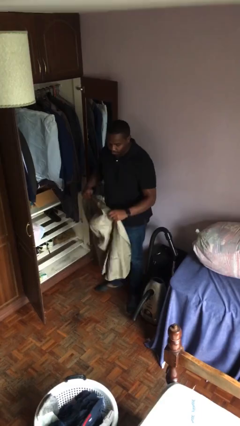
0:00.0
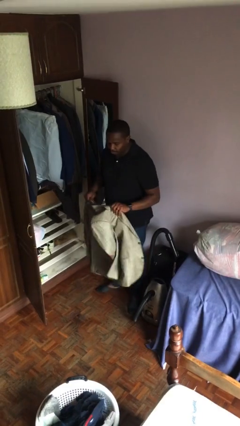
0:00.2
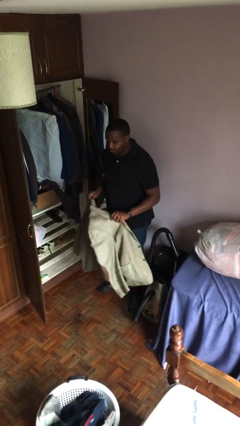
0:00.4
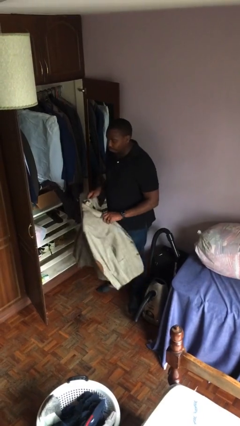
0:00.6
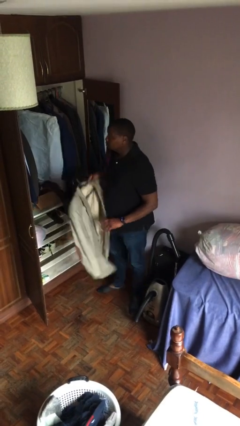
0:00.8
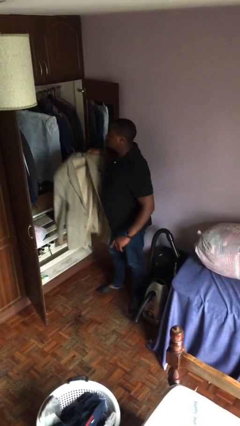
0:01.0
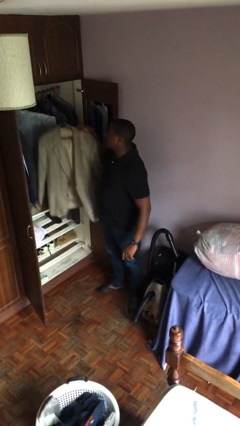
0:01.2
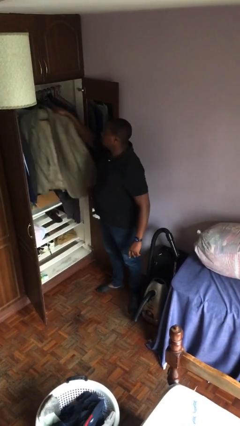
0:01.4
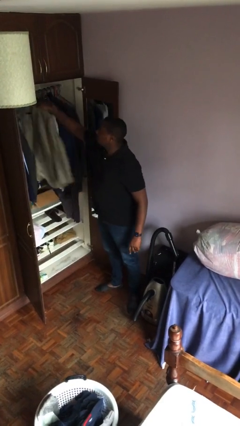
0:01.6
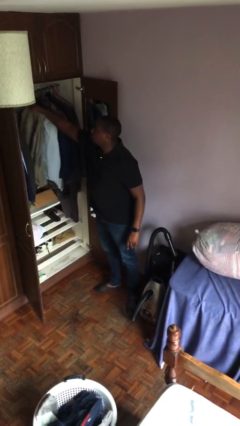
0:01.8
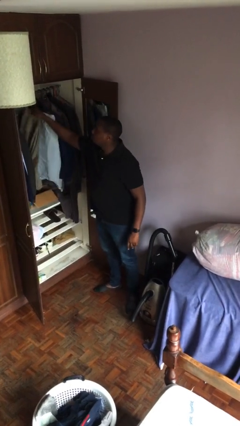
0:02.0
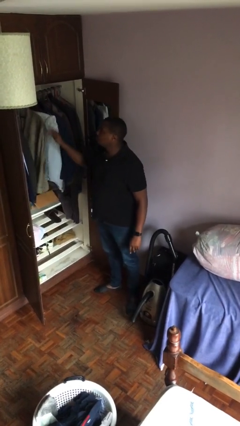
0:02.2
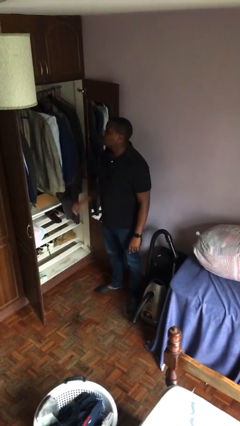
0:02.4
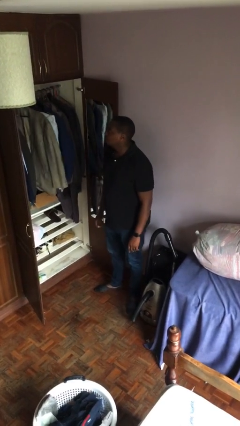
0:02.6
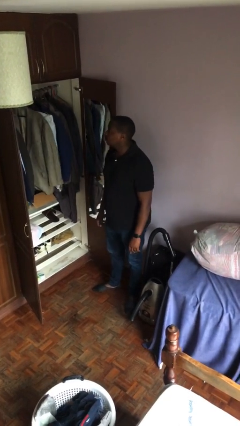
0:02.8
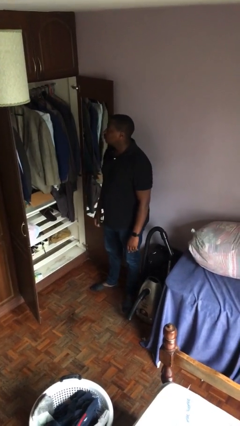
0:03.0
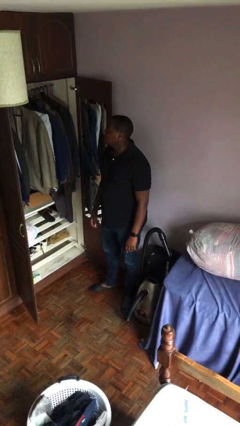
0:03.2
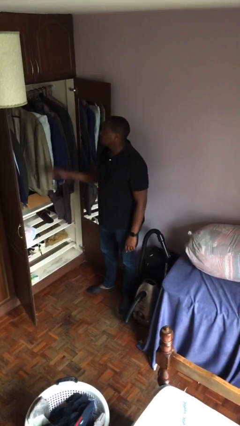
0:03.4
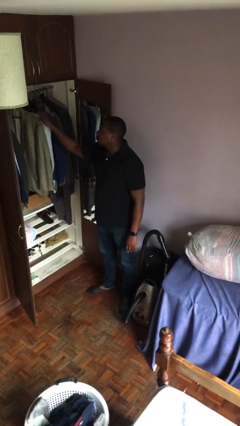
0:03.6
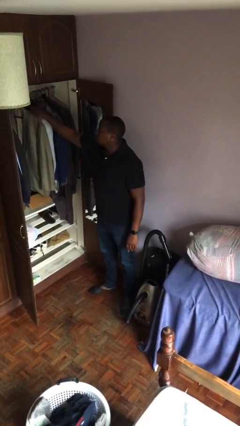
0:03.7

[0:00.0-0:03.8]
person puts clothes into closet

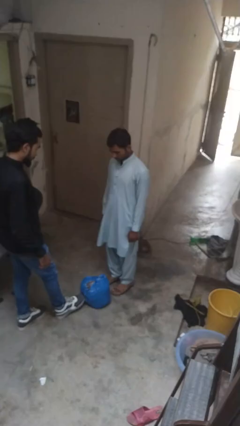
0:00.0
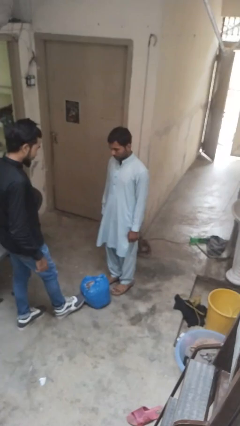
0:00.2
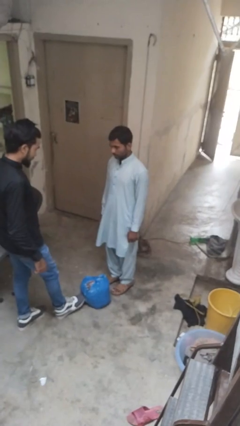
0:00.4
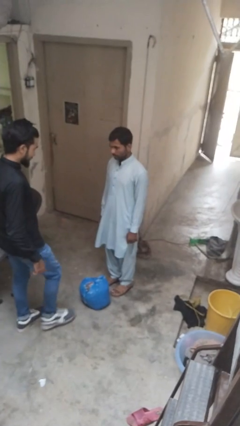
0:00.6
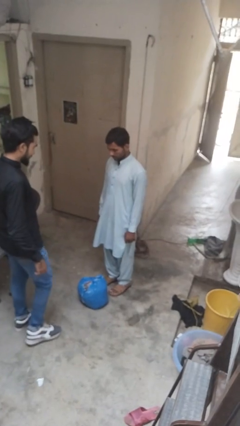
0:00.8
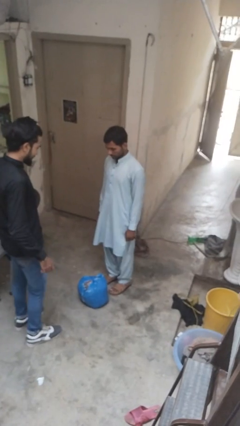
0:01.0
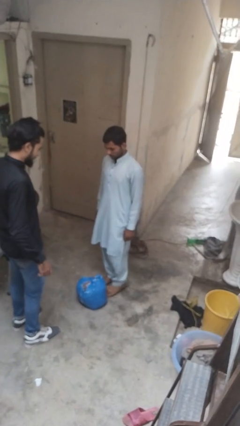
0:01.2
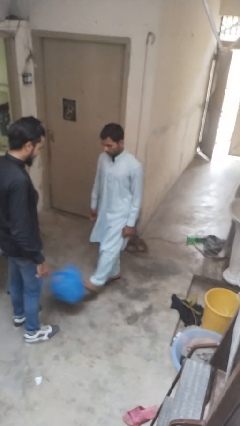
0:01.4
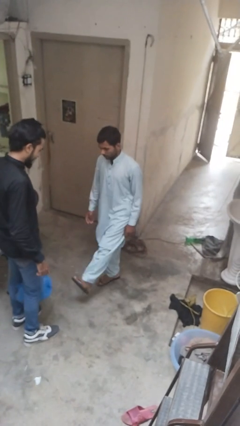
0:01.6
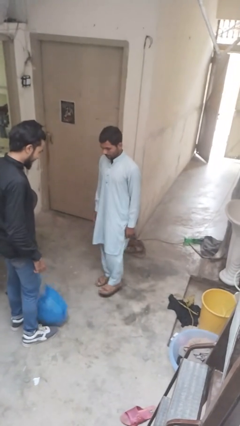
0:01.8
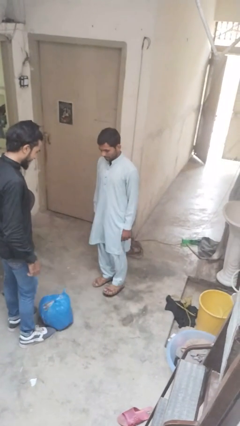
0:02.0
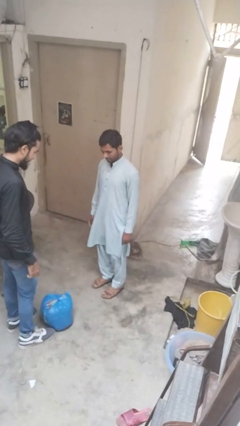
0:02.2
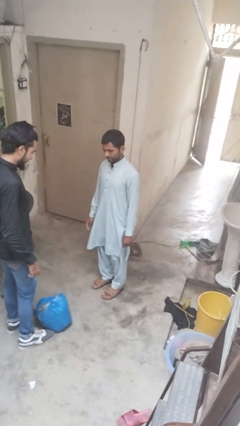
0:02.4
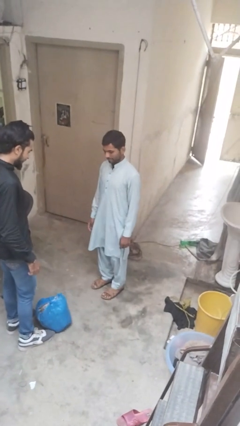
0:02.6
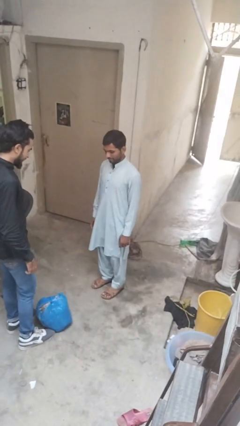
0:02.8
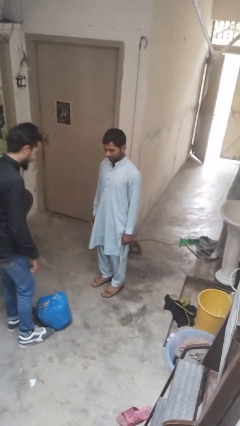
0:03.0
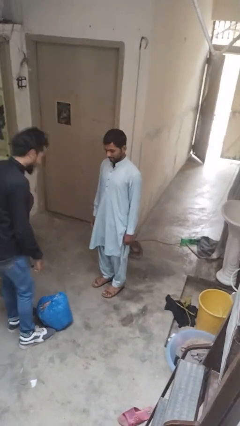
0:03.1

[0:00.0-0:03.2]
person kicks object to person

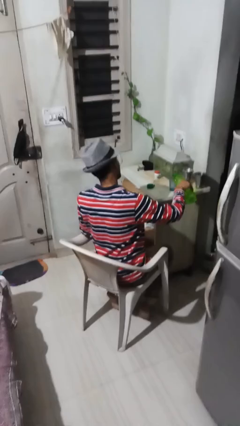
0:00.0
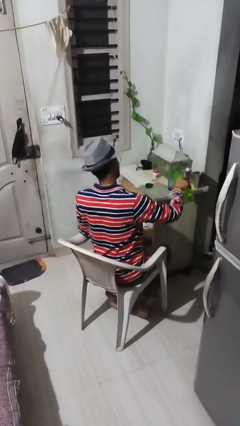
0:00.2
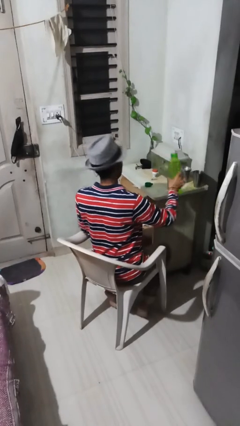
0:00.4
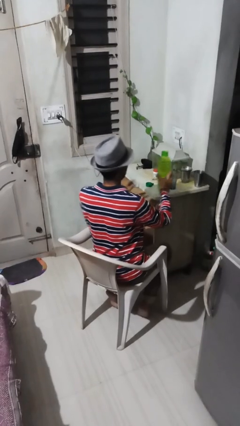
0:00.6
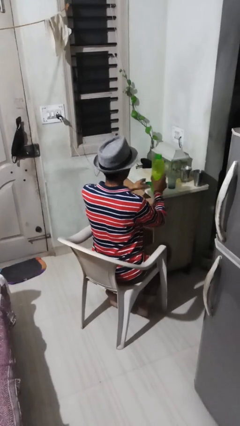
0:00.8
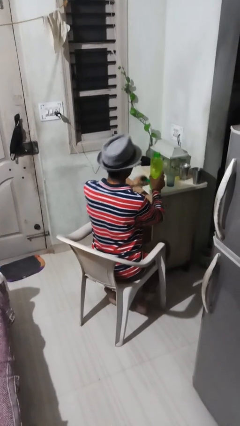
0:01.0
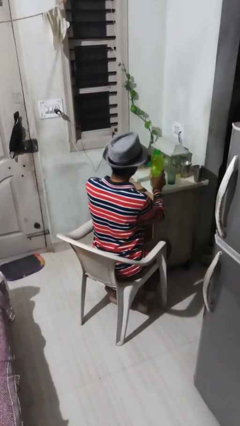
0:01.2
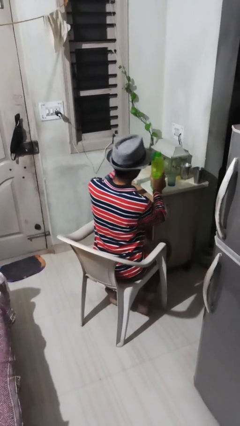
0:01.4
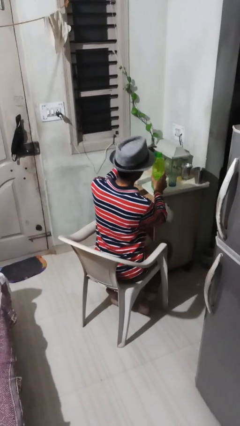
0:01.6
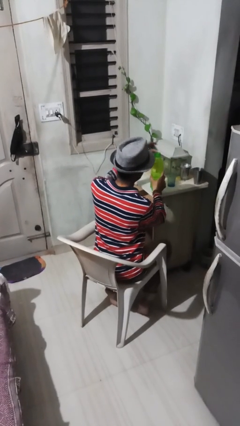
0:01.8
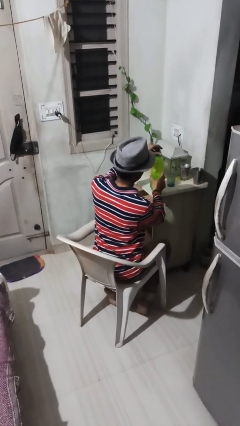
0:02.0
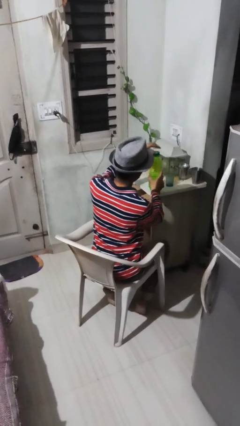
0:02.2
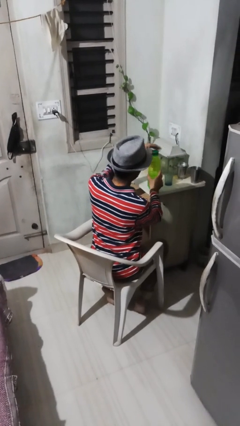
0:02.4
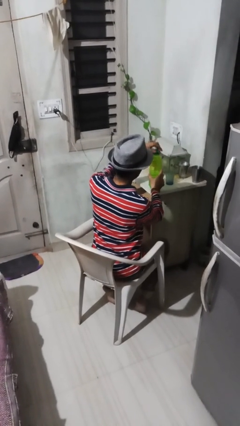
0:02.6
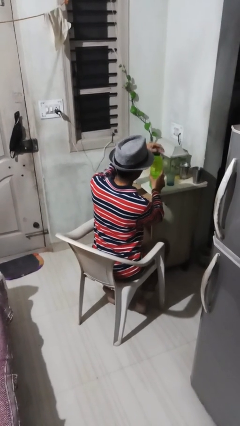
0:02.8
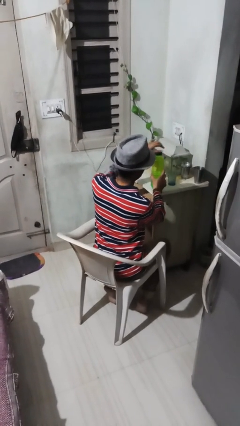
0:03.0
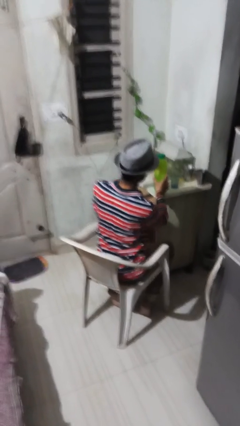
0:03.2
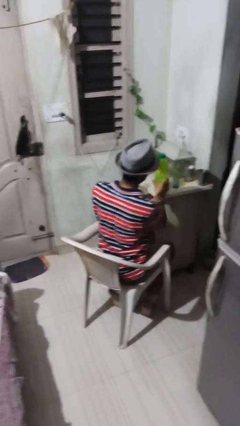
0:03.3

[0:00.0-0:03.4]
person screws lid to bottle

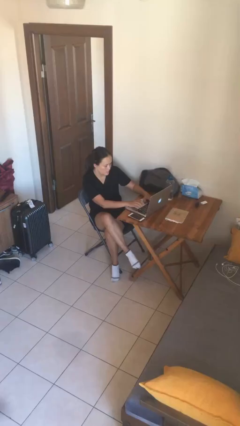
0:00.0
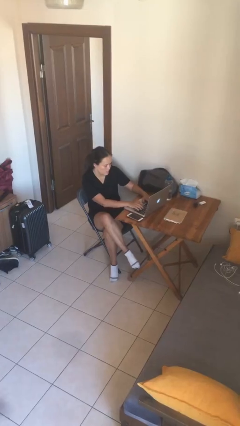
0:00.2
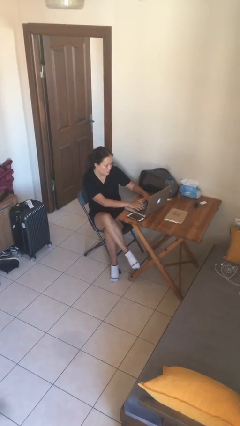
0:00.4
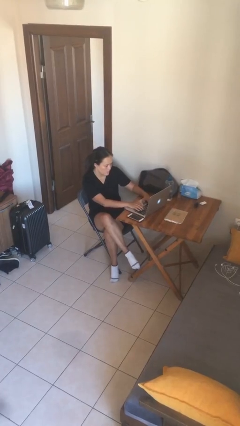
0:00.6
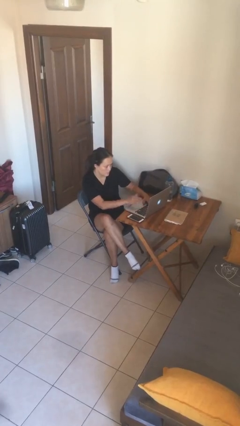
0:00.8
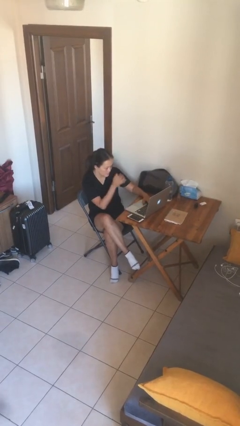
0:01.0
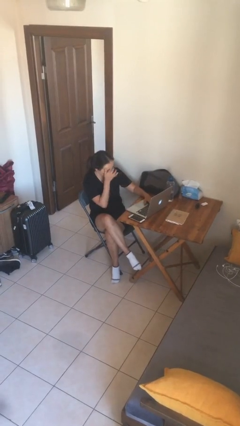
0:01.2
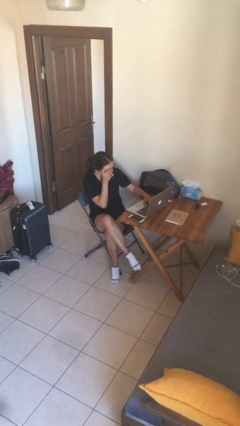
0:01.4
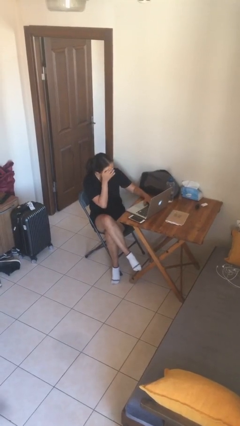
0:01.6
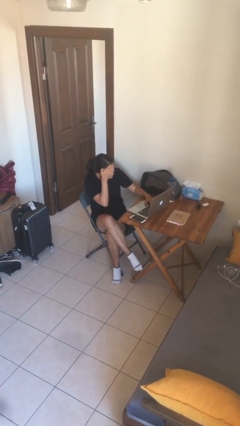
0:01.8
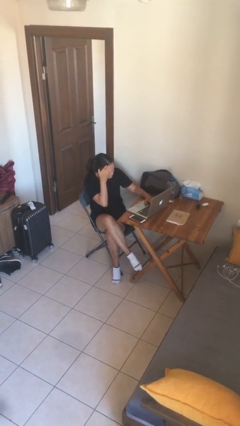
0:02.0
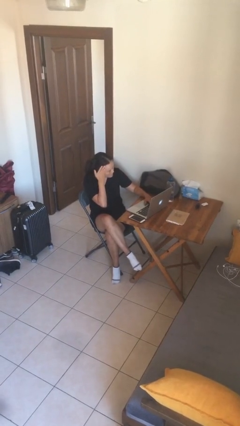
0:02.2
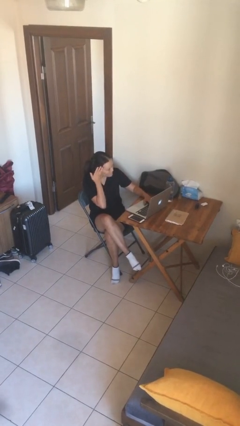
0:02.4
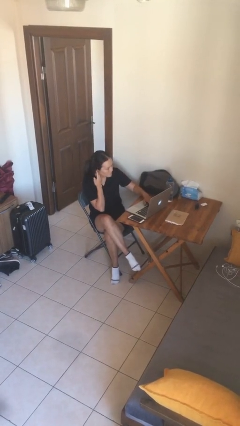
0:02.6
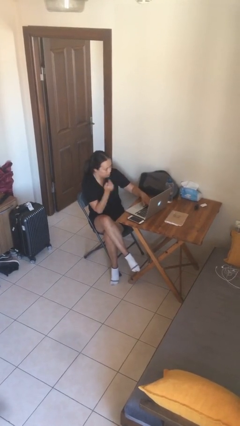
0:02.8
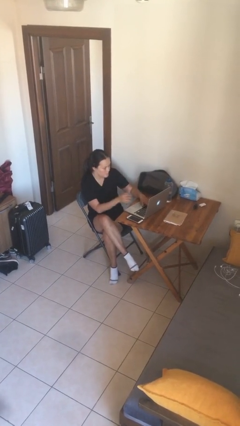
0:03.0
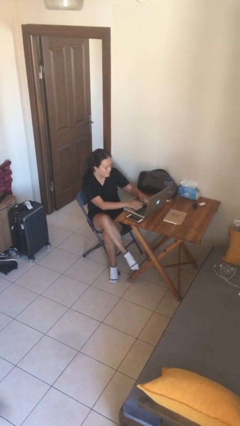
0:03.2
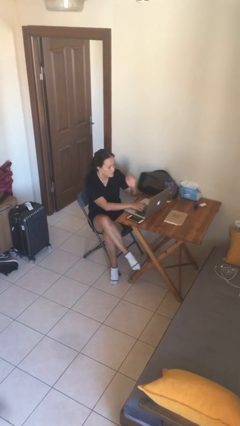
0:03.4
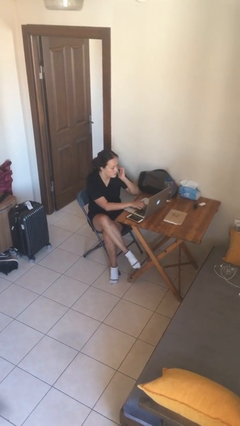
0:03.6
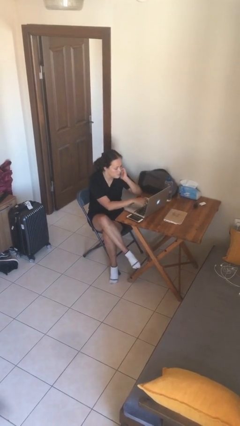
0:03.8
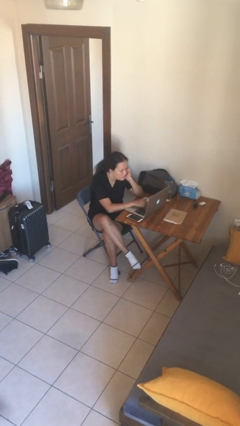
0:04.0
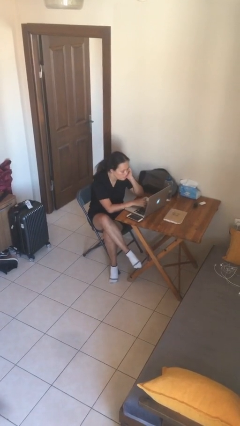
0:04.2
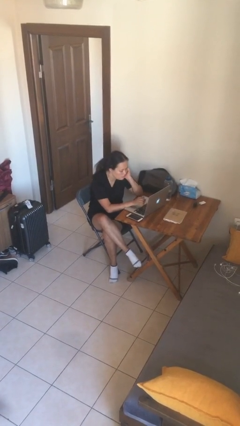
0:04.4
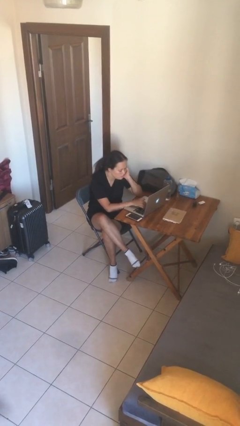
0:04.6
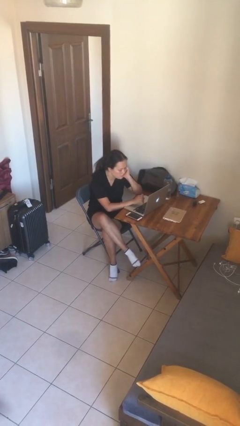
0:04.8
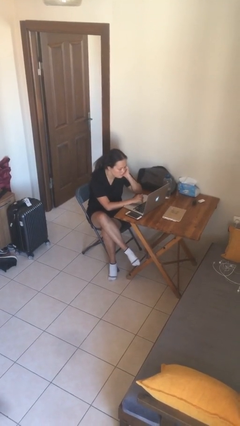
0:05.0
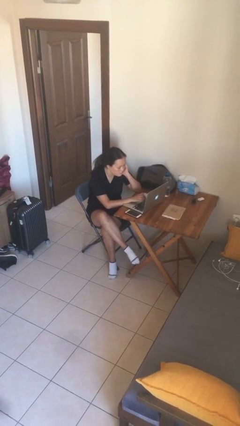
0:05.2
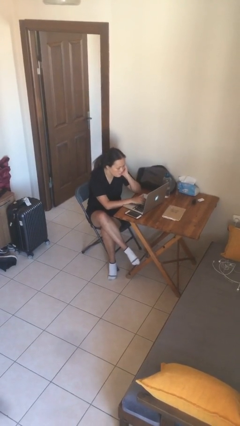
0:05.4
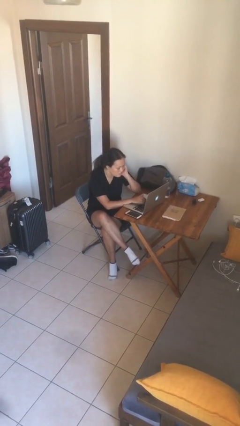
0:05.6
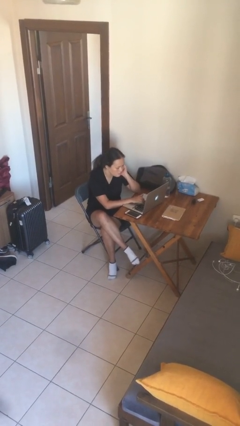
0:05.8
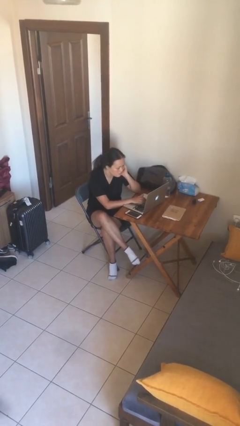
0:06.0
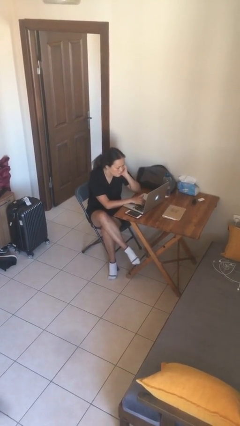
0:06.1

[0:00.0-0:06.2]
person interacts with laptop

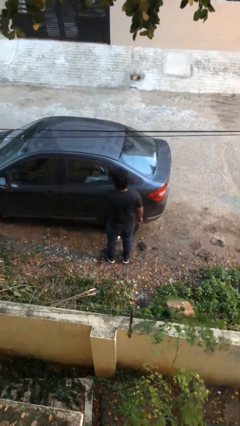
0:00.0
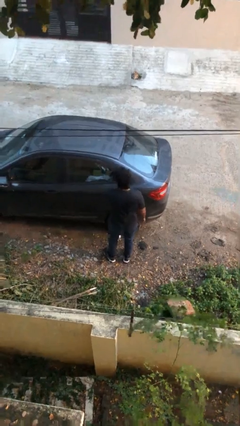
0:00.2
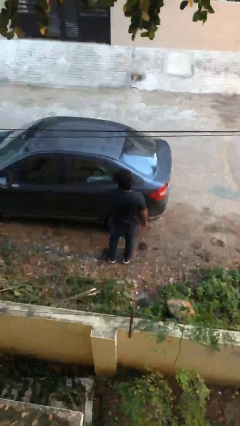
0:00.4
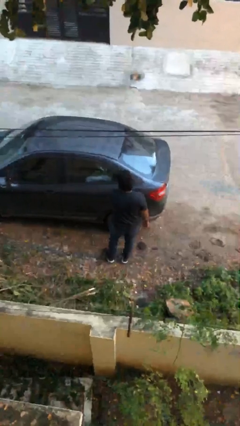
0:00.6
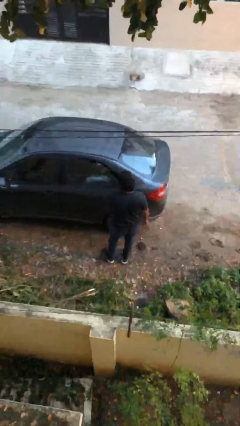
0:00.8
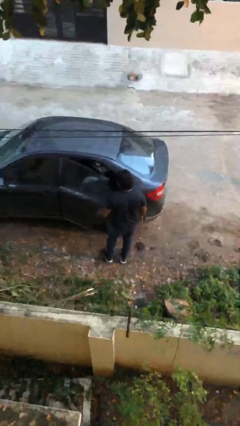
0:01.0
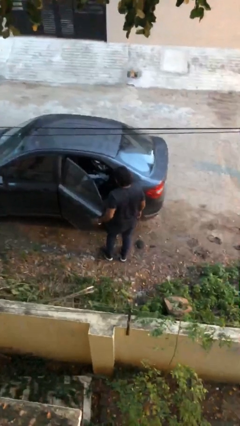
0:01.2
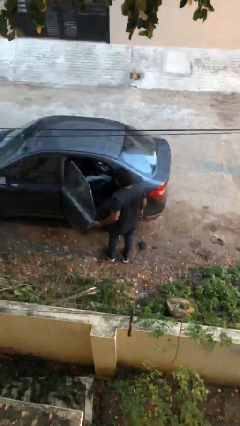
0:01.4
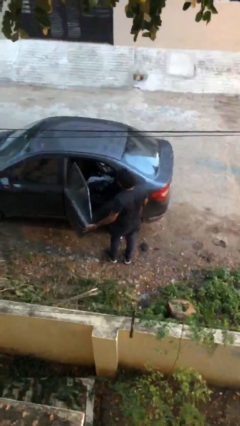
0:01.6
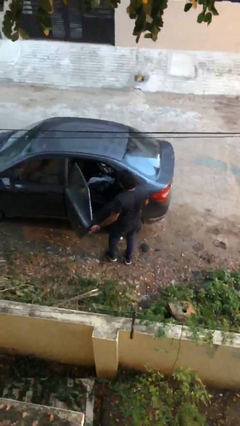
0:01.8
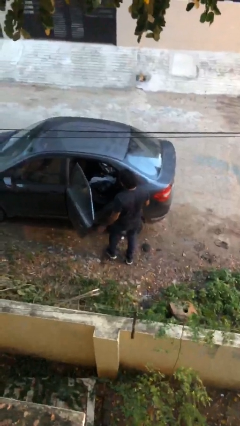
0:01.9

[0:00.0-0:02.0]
person opens car door
